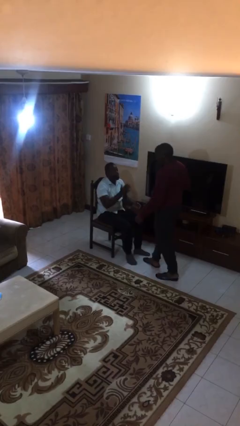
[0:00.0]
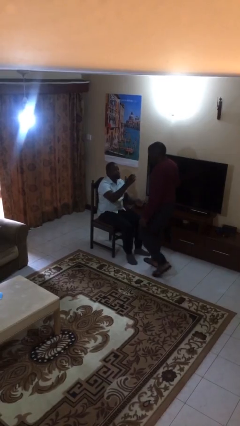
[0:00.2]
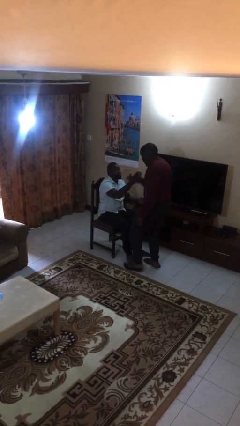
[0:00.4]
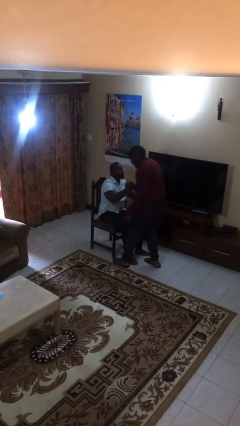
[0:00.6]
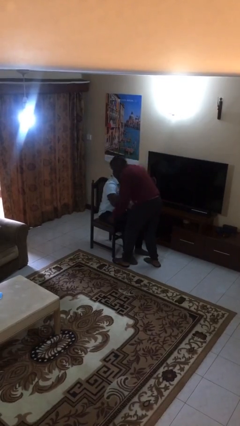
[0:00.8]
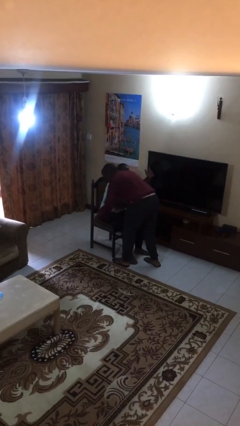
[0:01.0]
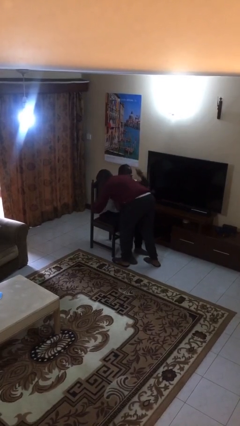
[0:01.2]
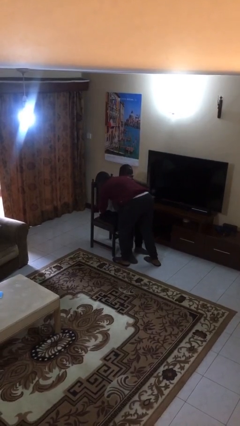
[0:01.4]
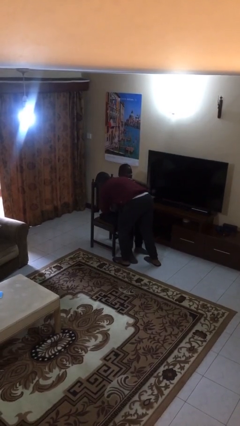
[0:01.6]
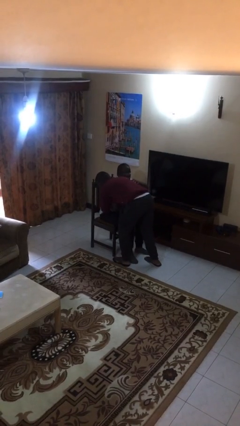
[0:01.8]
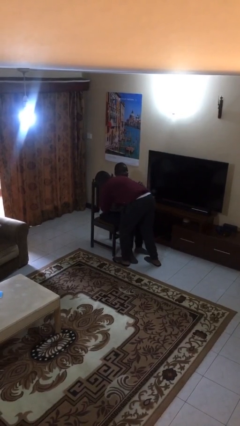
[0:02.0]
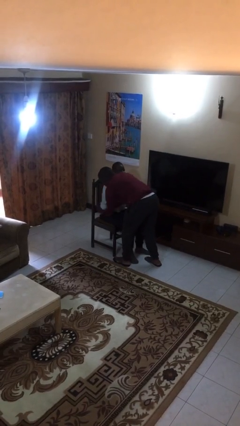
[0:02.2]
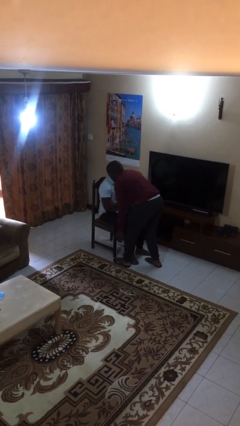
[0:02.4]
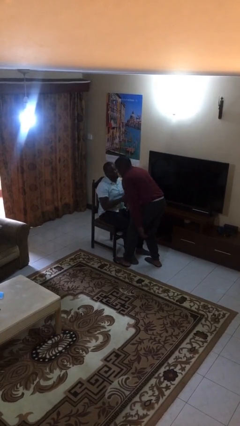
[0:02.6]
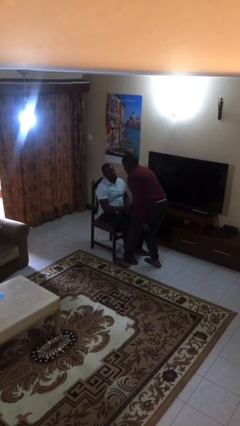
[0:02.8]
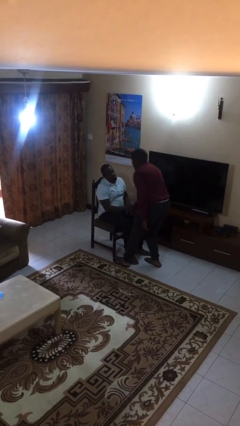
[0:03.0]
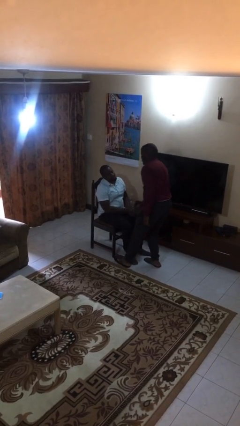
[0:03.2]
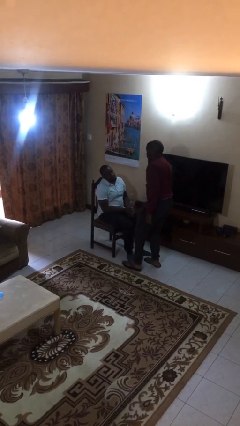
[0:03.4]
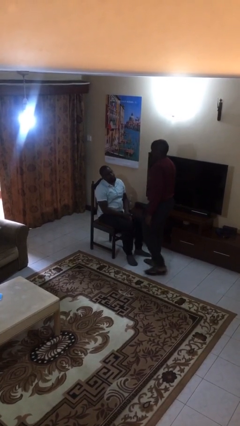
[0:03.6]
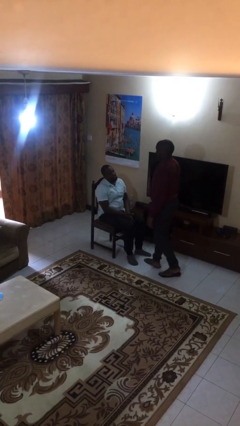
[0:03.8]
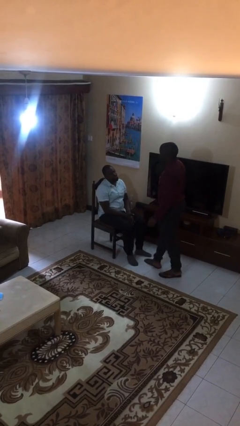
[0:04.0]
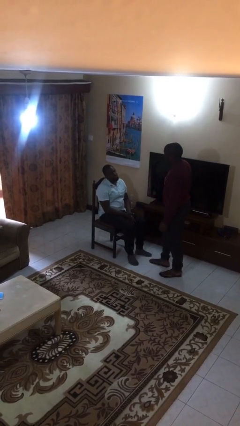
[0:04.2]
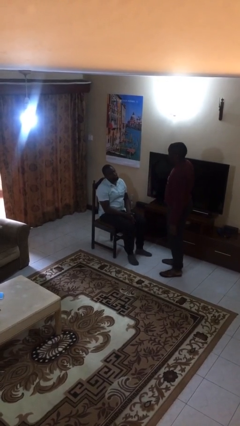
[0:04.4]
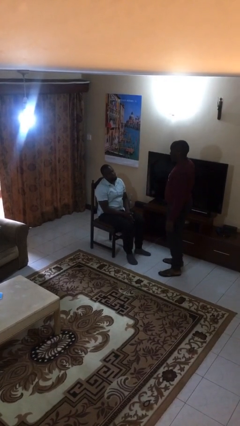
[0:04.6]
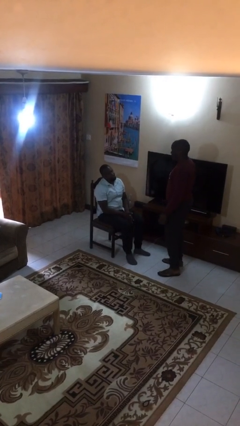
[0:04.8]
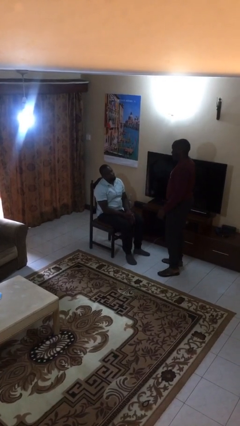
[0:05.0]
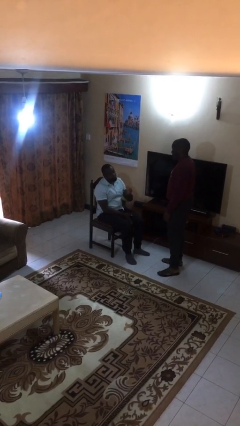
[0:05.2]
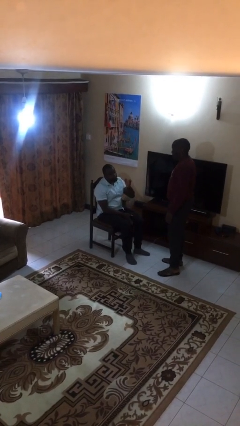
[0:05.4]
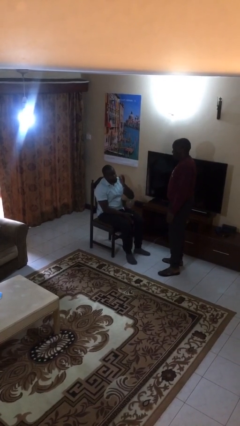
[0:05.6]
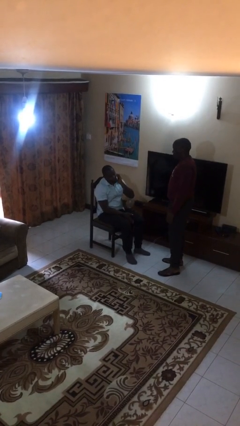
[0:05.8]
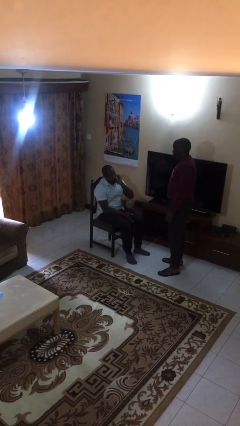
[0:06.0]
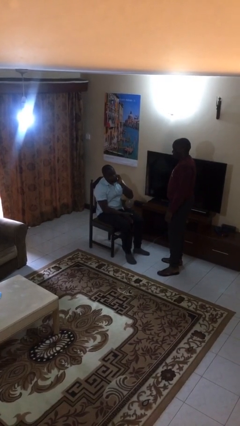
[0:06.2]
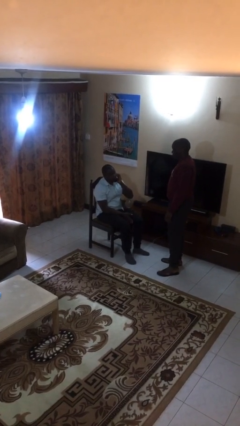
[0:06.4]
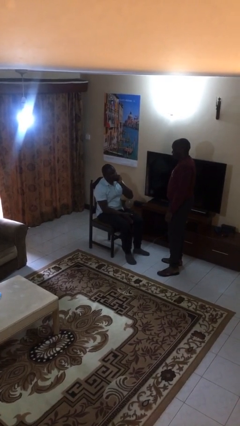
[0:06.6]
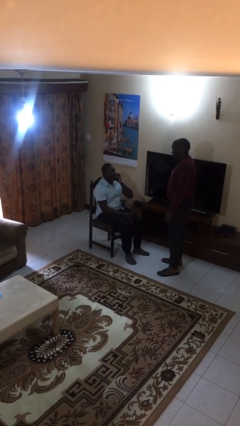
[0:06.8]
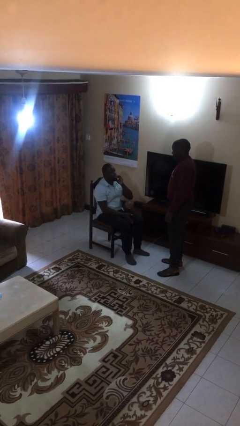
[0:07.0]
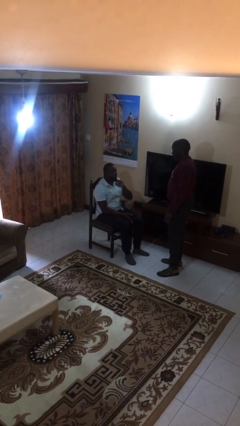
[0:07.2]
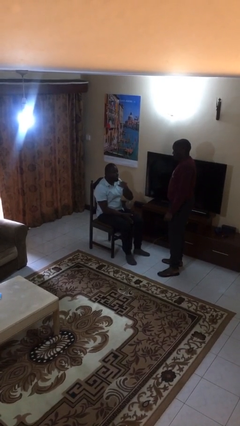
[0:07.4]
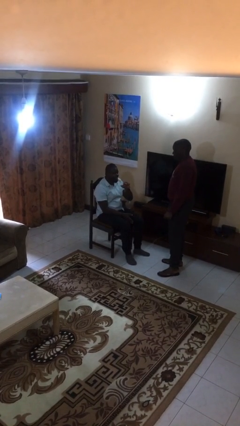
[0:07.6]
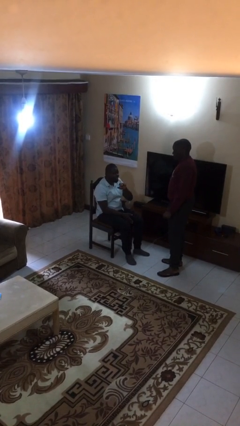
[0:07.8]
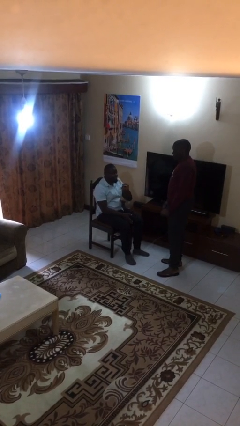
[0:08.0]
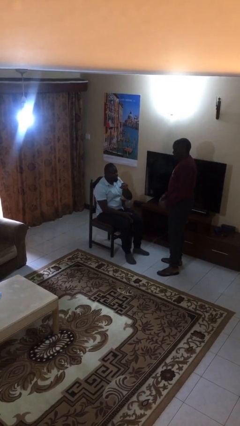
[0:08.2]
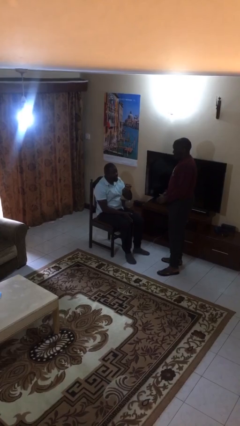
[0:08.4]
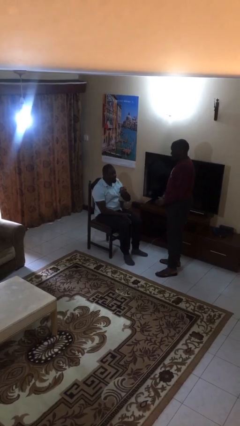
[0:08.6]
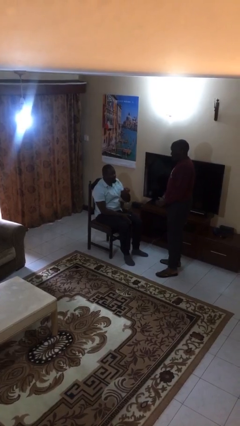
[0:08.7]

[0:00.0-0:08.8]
person embraces person

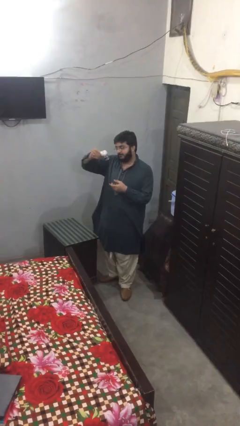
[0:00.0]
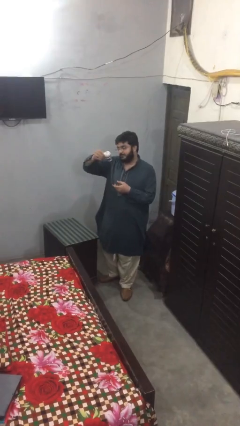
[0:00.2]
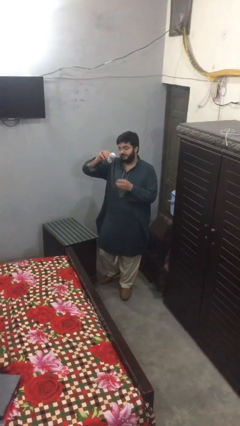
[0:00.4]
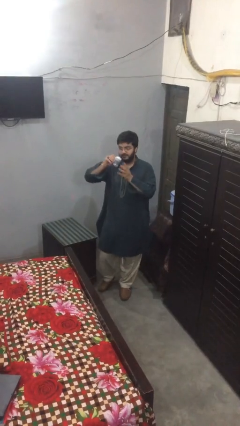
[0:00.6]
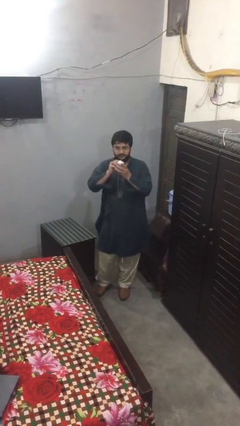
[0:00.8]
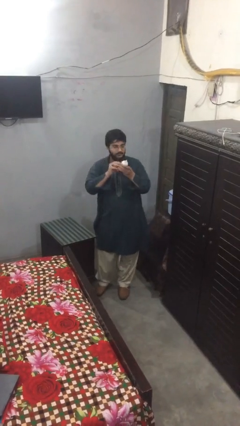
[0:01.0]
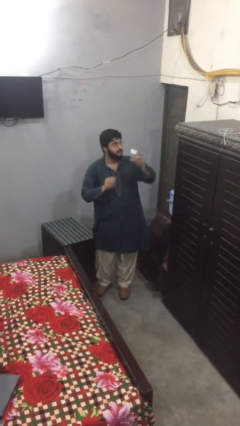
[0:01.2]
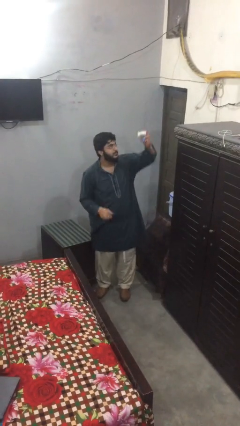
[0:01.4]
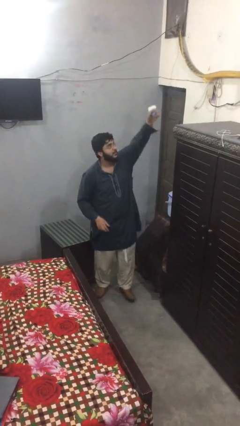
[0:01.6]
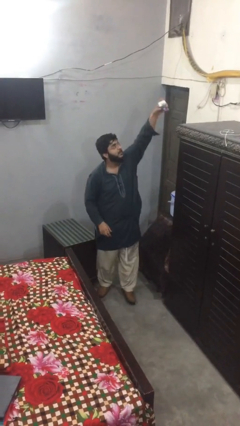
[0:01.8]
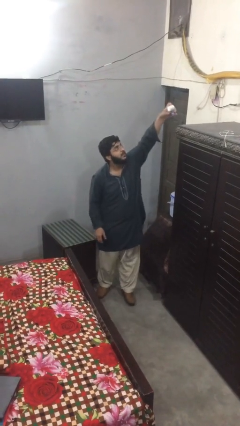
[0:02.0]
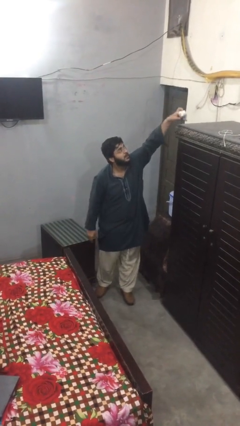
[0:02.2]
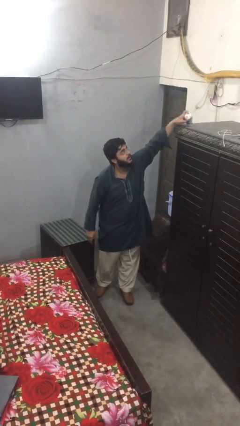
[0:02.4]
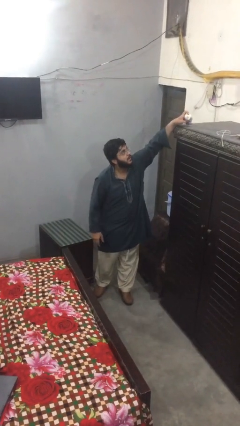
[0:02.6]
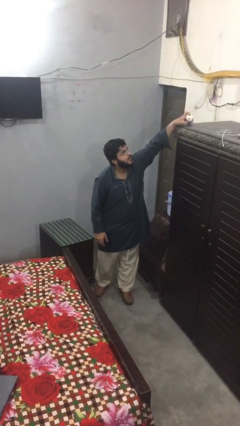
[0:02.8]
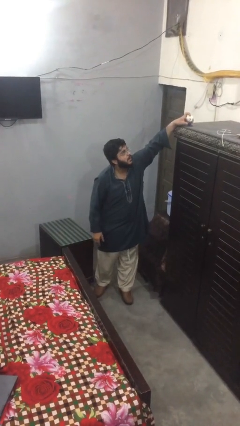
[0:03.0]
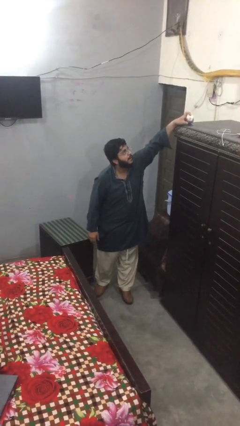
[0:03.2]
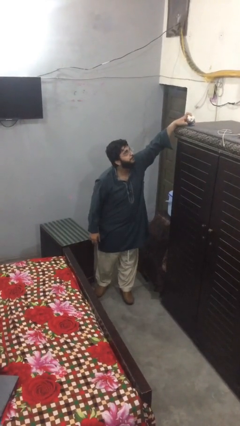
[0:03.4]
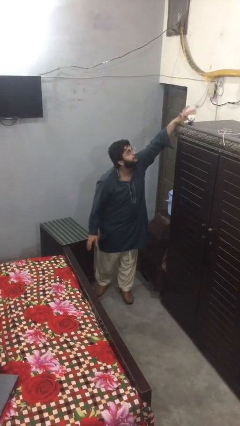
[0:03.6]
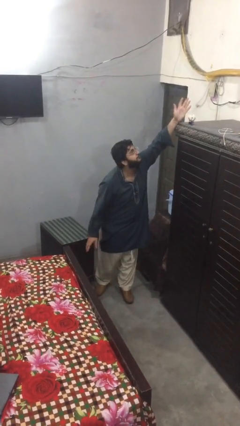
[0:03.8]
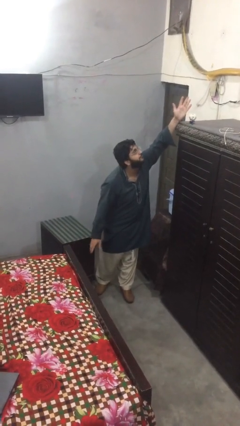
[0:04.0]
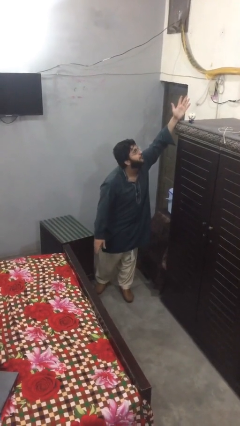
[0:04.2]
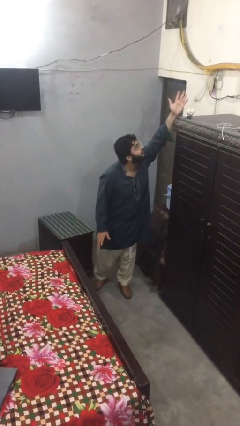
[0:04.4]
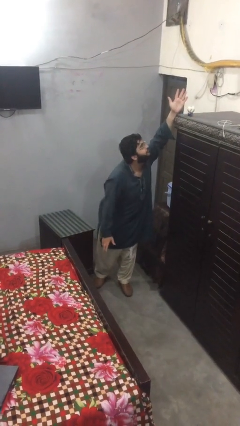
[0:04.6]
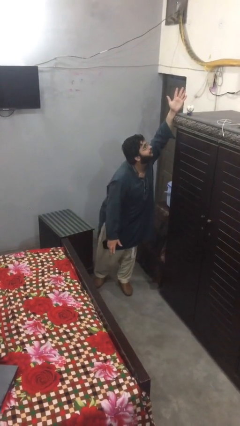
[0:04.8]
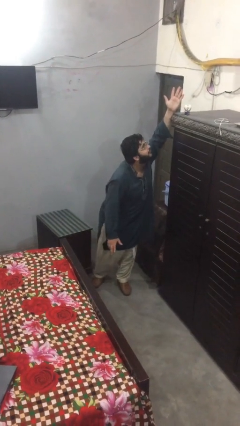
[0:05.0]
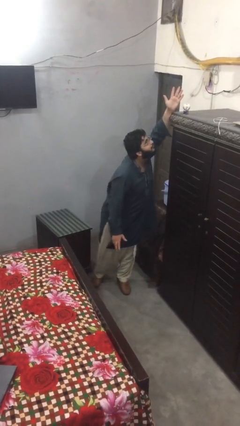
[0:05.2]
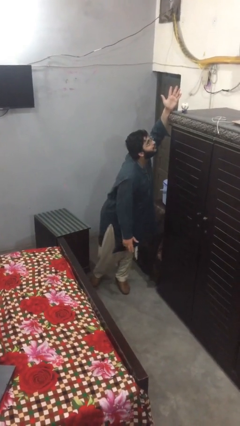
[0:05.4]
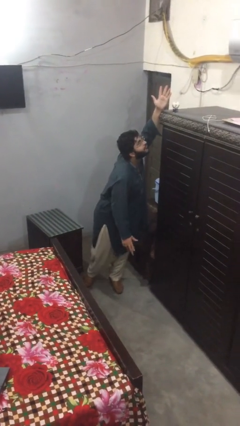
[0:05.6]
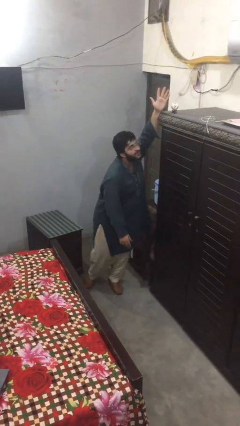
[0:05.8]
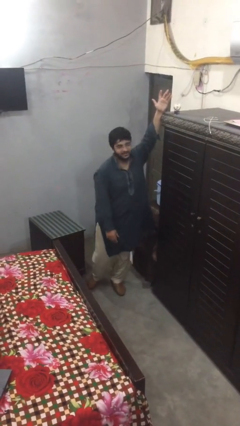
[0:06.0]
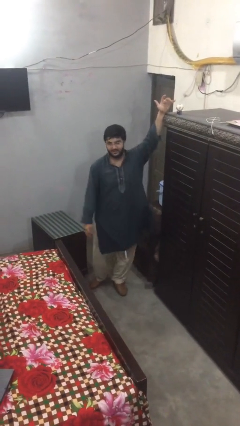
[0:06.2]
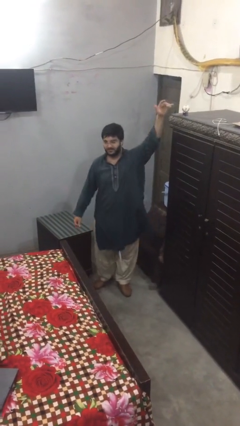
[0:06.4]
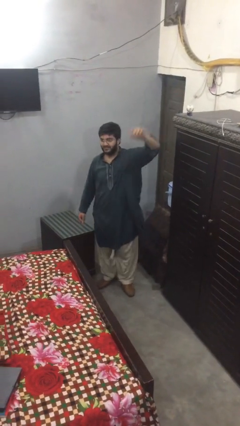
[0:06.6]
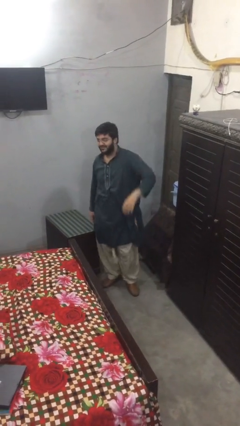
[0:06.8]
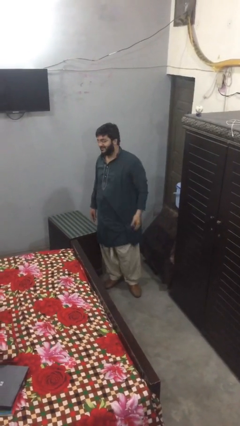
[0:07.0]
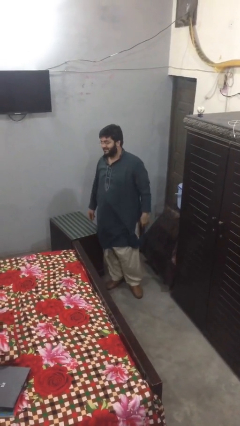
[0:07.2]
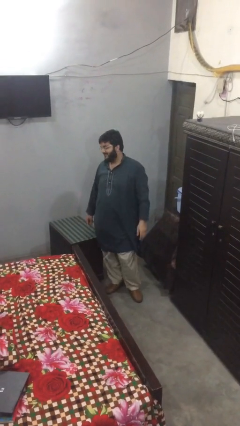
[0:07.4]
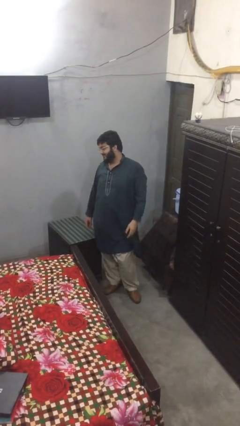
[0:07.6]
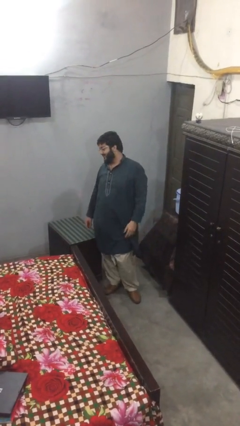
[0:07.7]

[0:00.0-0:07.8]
person puts down object on shelf

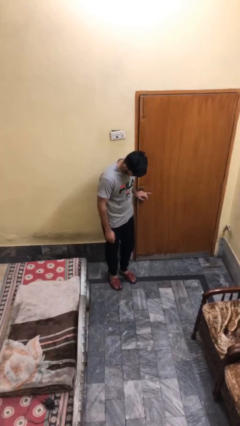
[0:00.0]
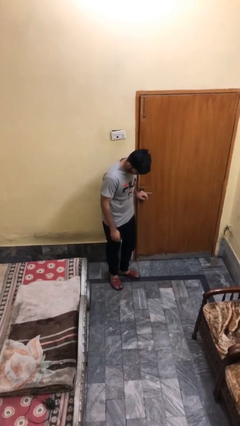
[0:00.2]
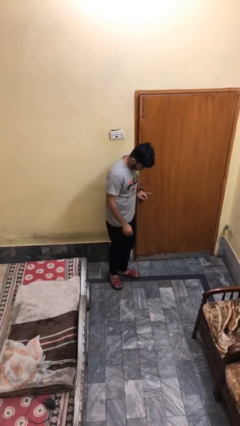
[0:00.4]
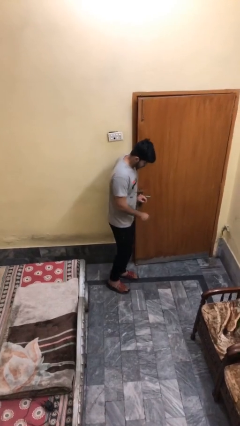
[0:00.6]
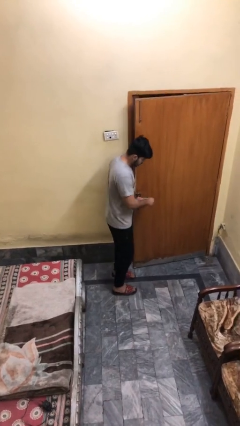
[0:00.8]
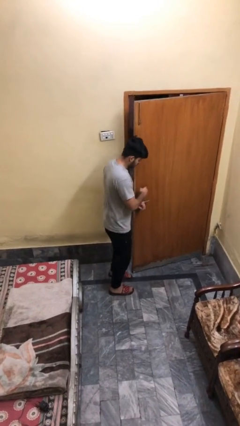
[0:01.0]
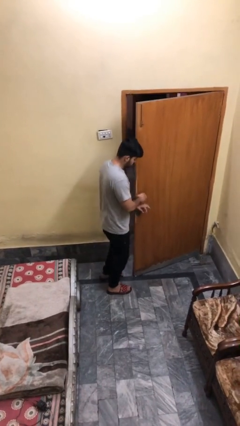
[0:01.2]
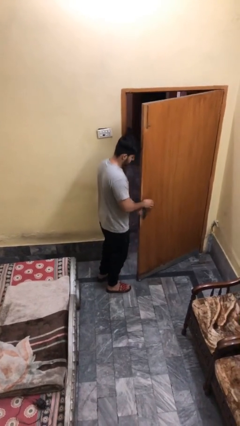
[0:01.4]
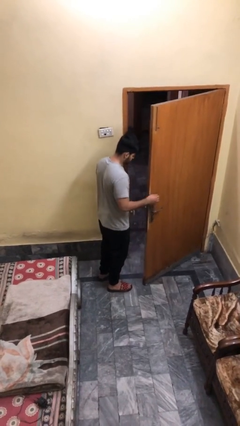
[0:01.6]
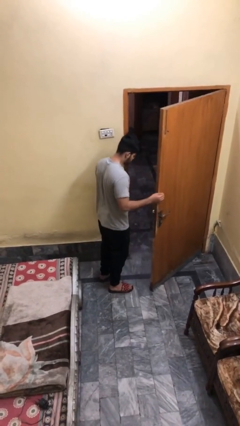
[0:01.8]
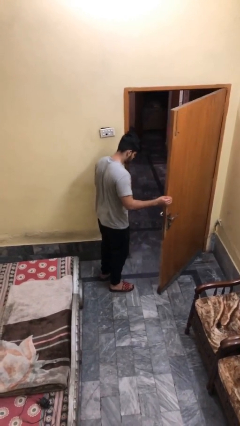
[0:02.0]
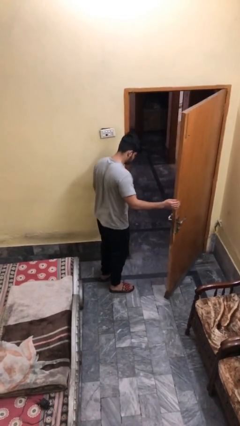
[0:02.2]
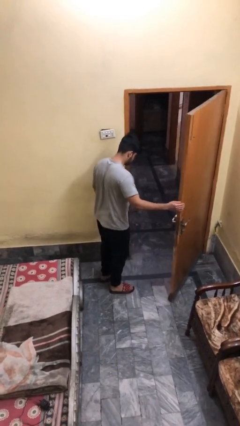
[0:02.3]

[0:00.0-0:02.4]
person opens facility door
